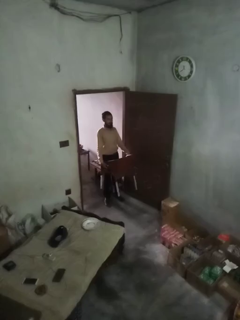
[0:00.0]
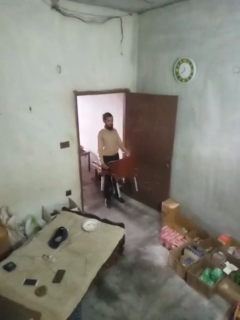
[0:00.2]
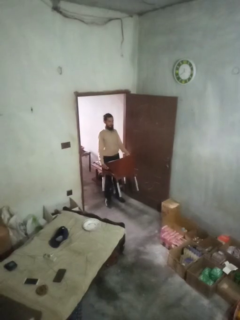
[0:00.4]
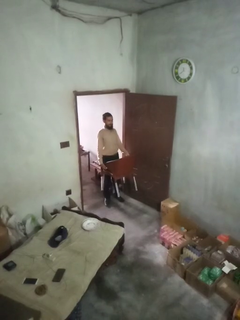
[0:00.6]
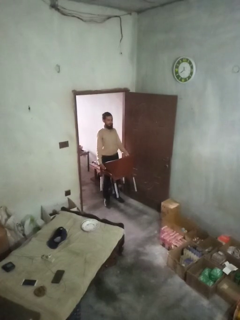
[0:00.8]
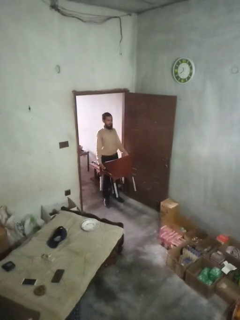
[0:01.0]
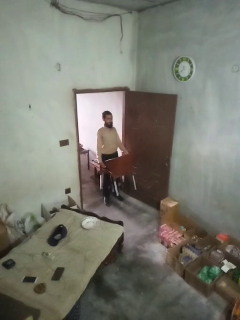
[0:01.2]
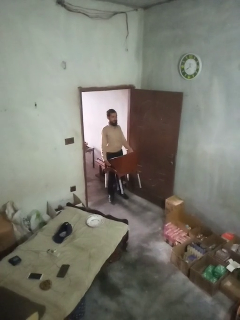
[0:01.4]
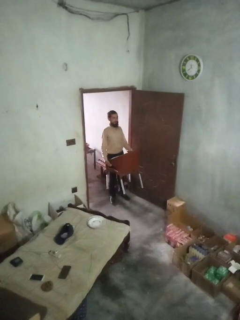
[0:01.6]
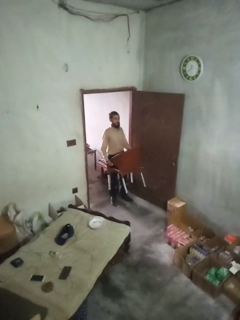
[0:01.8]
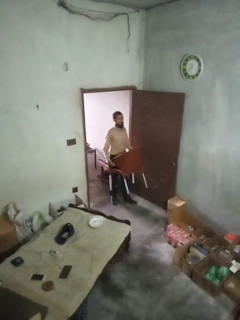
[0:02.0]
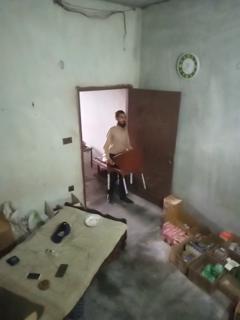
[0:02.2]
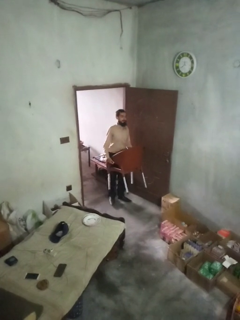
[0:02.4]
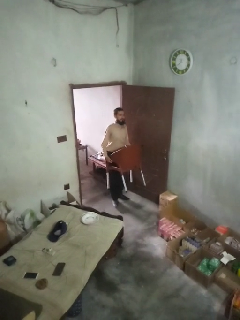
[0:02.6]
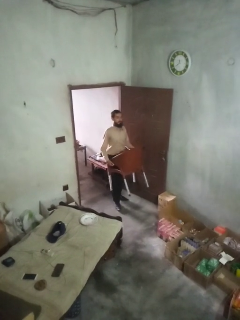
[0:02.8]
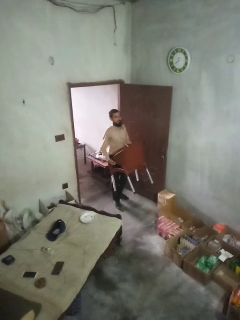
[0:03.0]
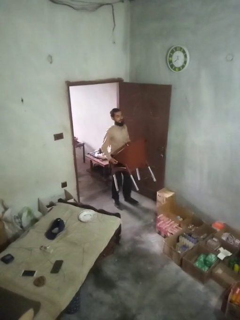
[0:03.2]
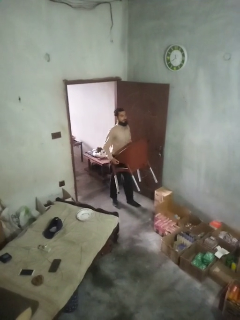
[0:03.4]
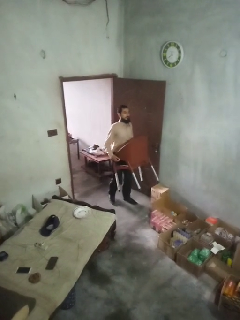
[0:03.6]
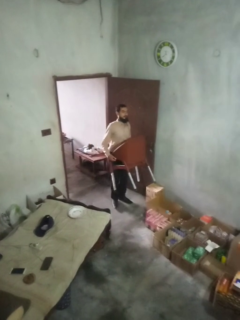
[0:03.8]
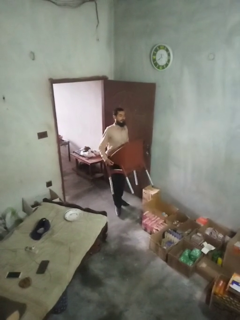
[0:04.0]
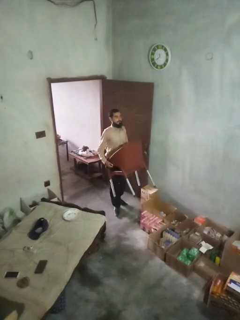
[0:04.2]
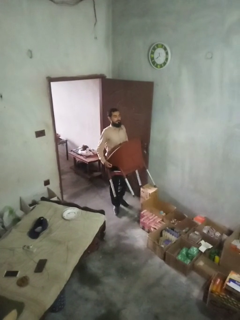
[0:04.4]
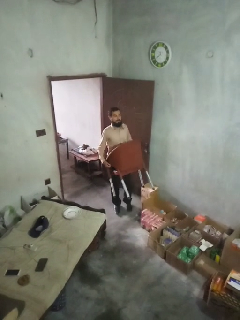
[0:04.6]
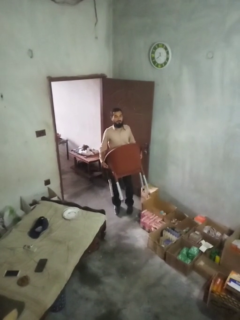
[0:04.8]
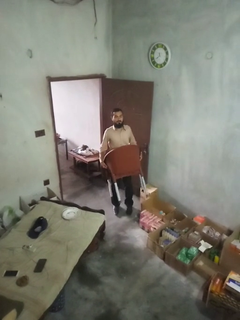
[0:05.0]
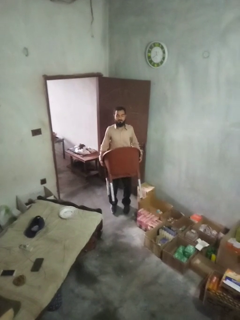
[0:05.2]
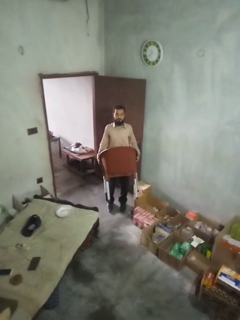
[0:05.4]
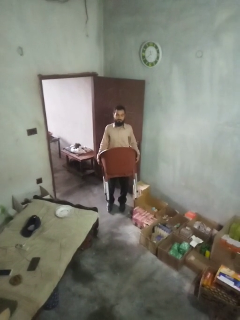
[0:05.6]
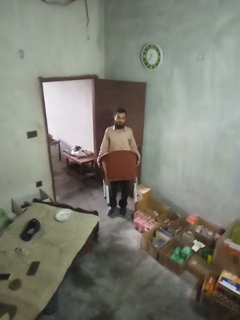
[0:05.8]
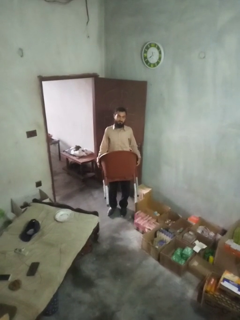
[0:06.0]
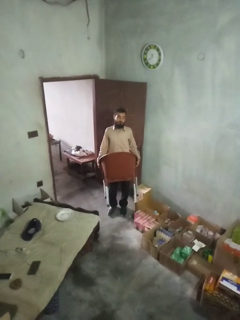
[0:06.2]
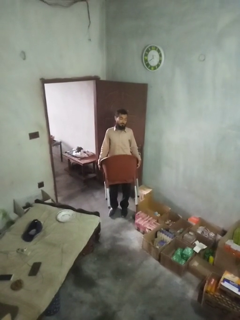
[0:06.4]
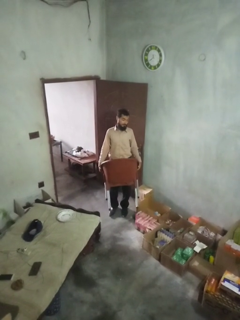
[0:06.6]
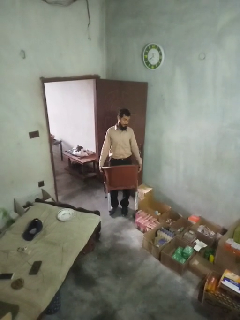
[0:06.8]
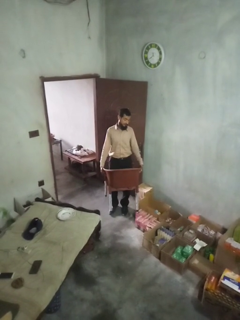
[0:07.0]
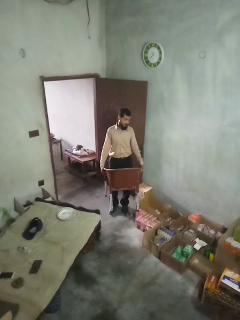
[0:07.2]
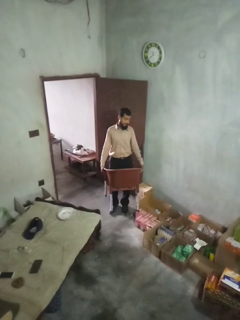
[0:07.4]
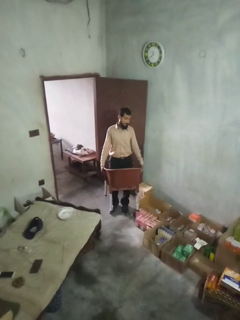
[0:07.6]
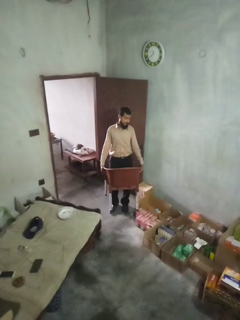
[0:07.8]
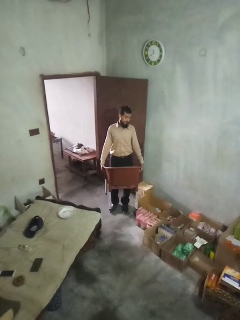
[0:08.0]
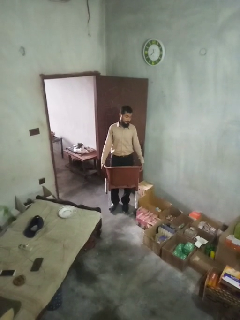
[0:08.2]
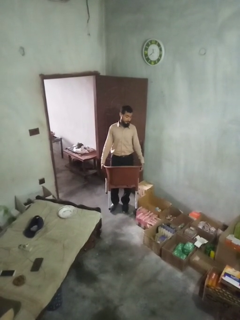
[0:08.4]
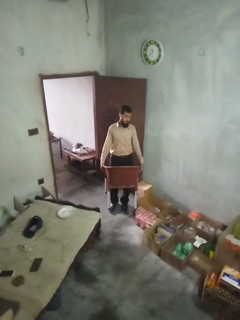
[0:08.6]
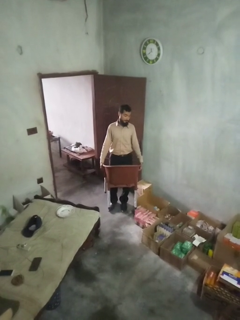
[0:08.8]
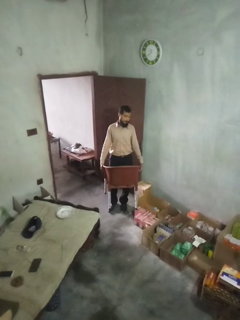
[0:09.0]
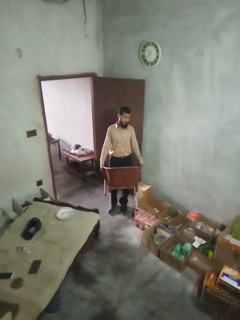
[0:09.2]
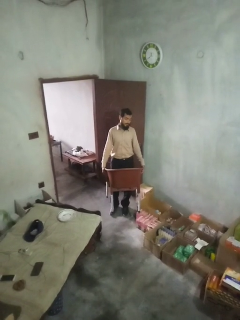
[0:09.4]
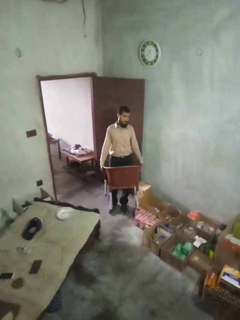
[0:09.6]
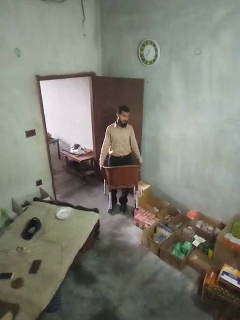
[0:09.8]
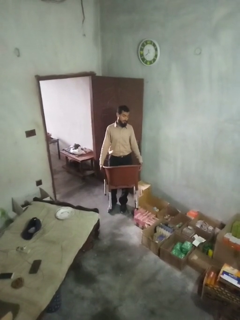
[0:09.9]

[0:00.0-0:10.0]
person carries furniture

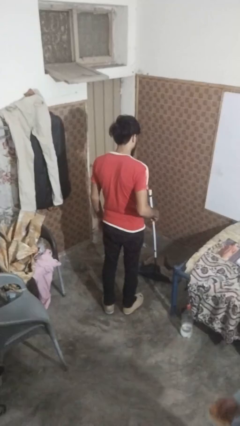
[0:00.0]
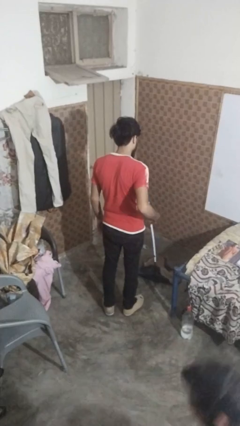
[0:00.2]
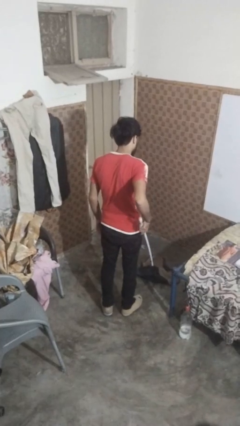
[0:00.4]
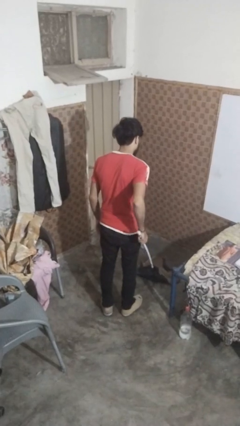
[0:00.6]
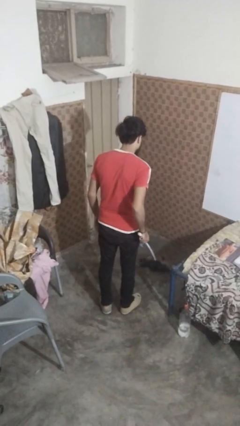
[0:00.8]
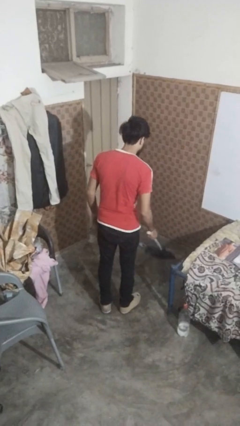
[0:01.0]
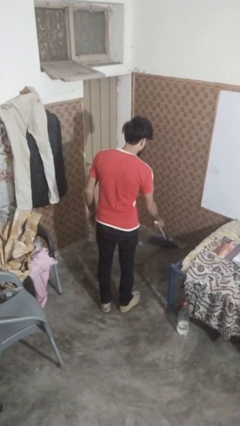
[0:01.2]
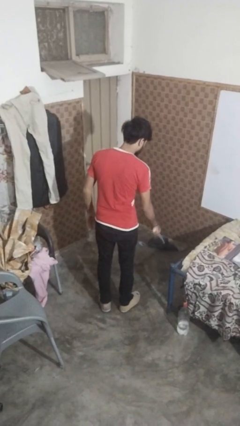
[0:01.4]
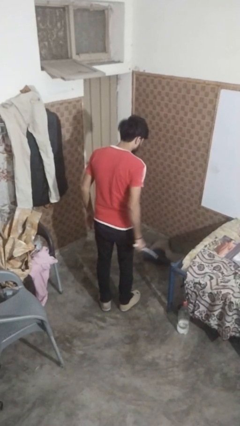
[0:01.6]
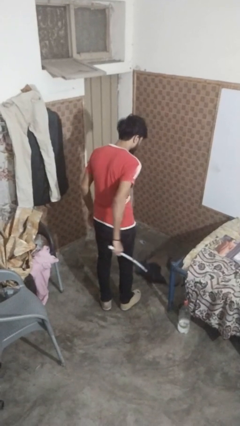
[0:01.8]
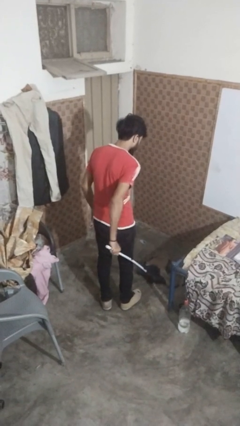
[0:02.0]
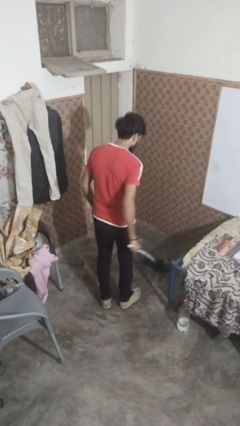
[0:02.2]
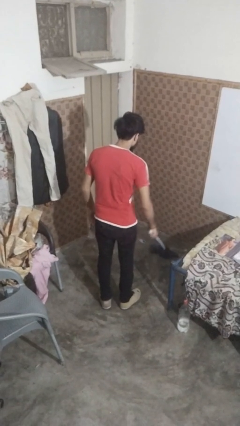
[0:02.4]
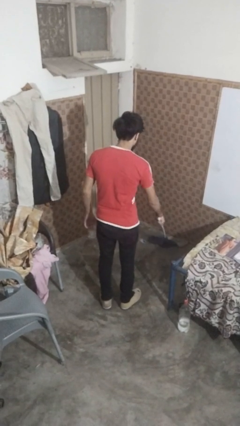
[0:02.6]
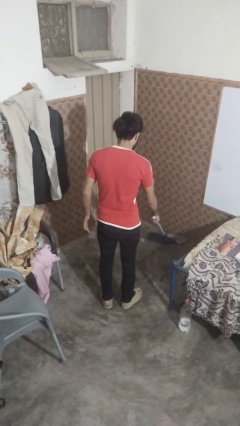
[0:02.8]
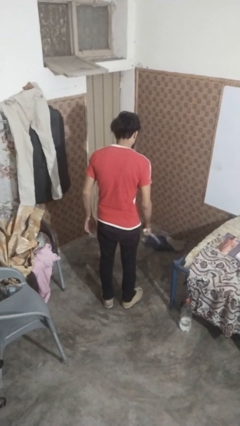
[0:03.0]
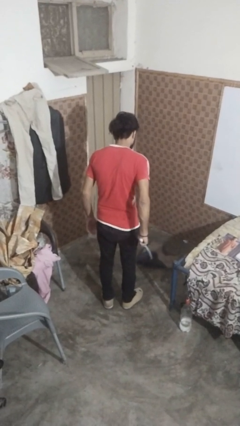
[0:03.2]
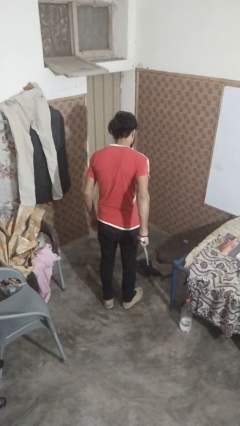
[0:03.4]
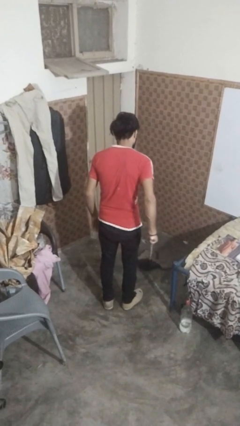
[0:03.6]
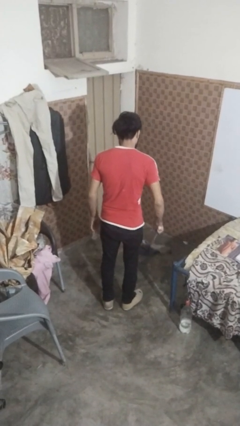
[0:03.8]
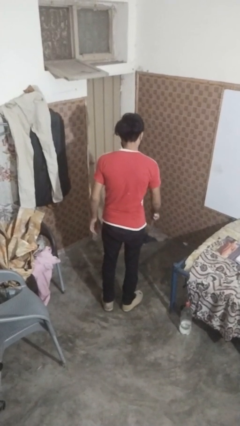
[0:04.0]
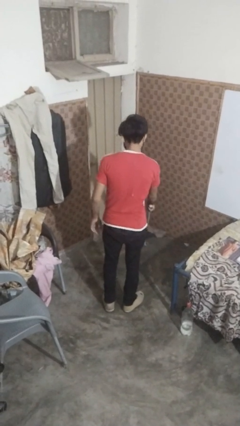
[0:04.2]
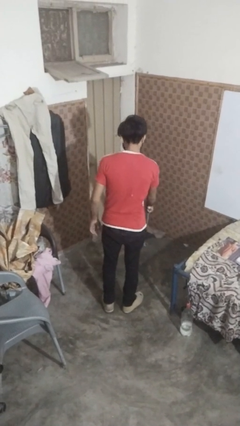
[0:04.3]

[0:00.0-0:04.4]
person mops

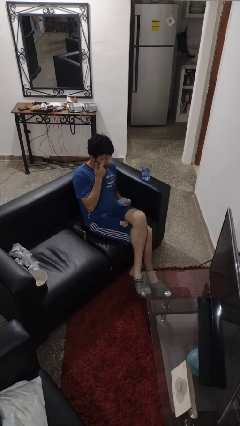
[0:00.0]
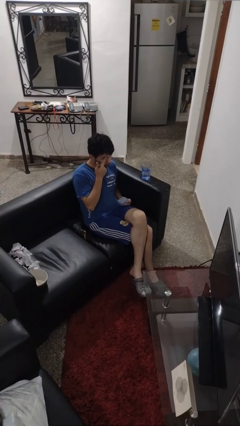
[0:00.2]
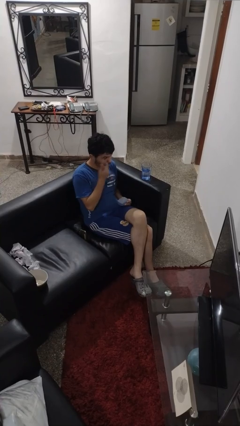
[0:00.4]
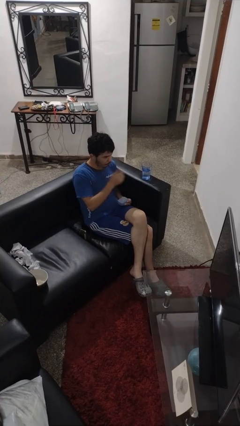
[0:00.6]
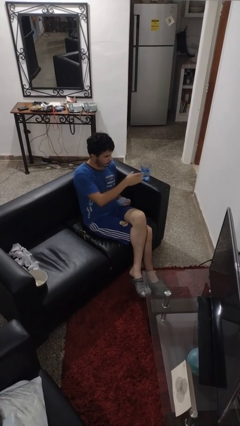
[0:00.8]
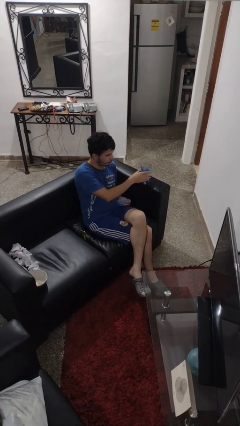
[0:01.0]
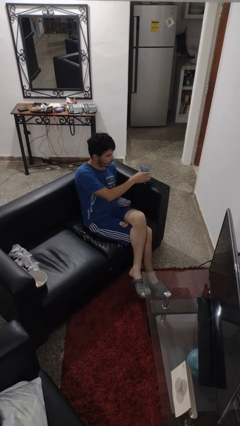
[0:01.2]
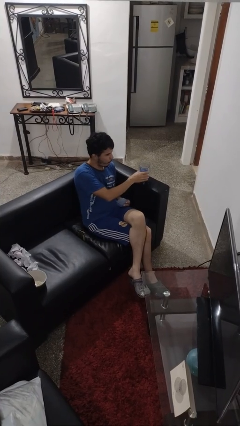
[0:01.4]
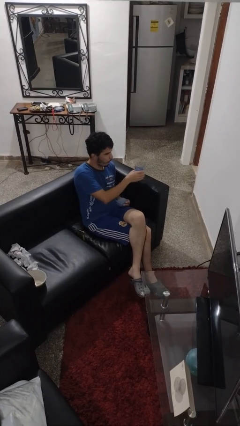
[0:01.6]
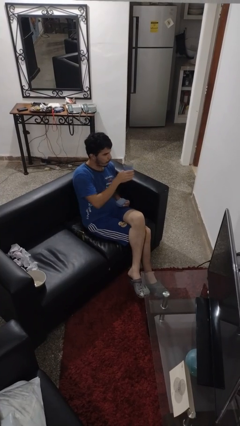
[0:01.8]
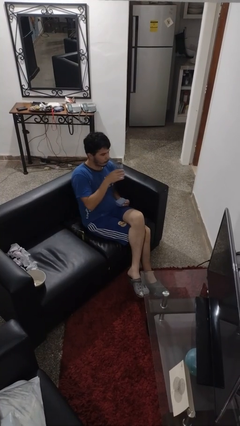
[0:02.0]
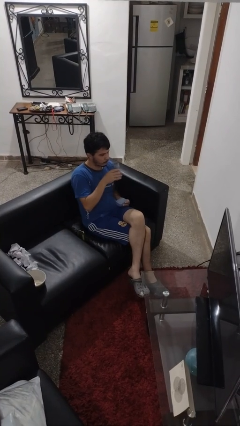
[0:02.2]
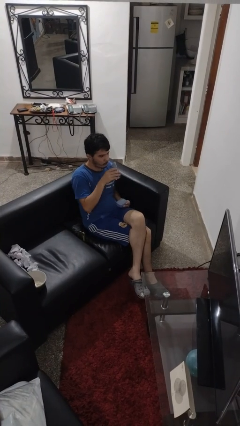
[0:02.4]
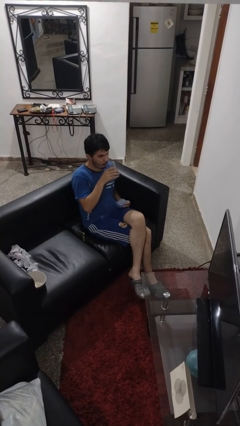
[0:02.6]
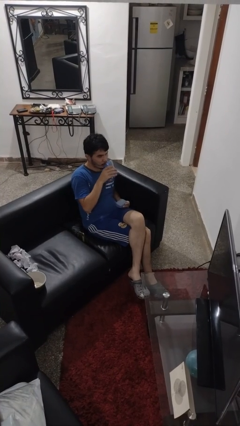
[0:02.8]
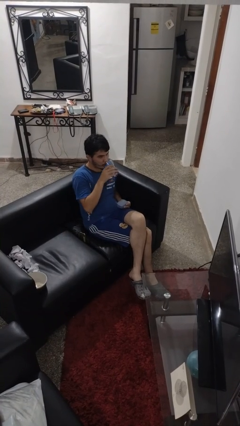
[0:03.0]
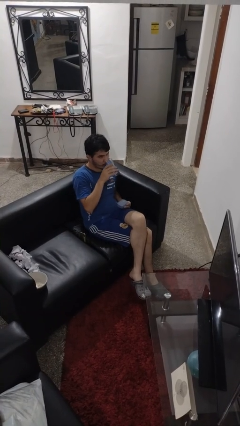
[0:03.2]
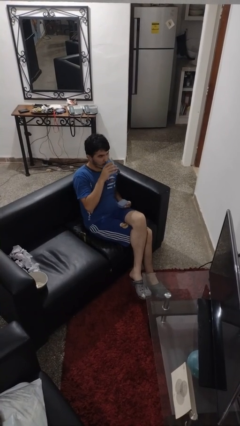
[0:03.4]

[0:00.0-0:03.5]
person drinks from cup

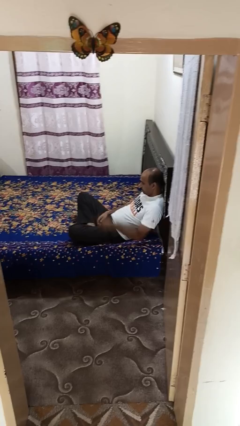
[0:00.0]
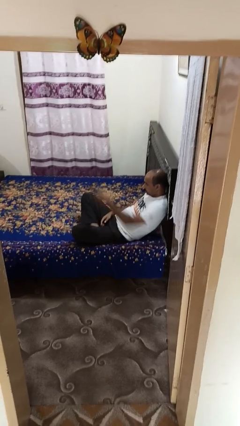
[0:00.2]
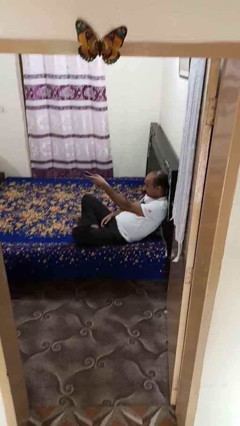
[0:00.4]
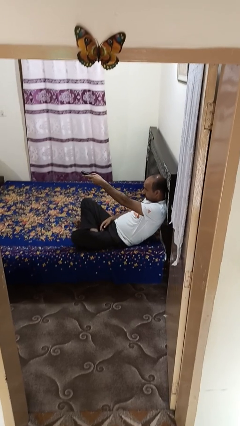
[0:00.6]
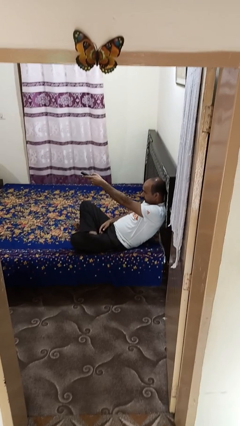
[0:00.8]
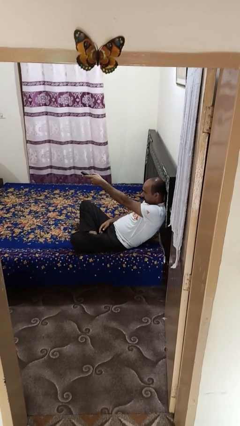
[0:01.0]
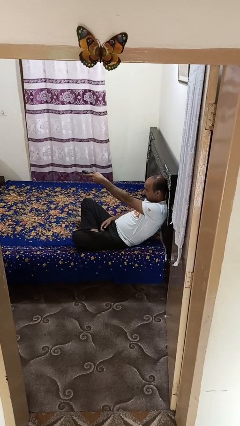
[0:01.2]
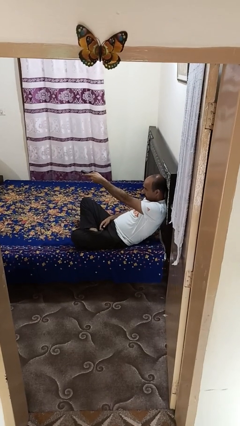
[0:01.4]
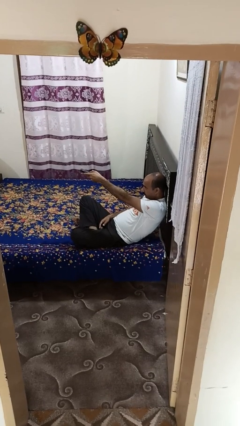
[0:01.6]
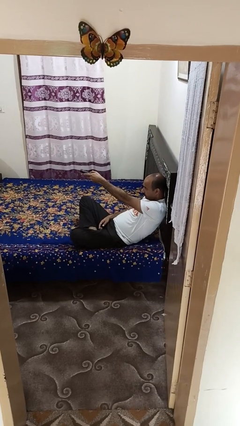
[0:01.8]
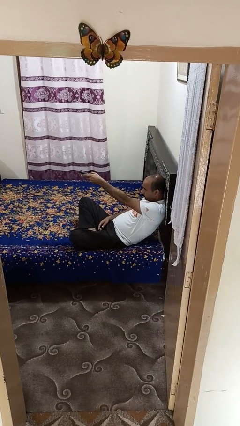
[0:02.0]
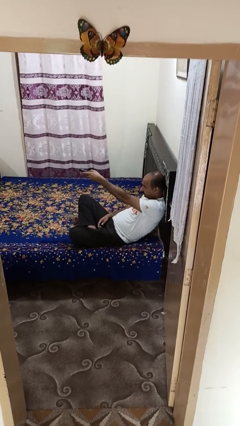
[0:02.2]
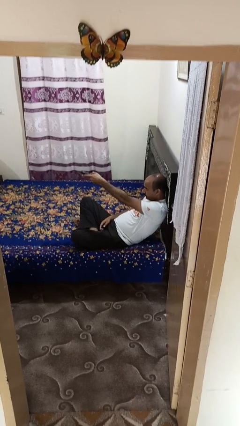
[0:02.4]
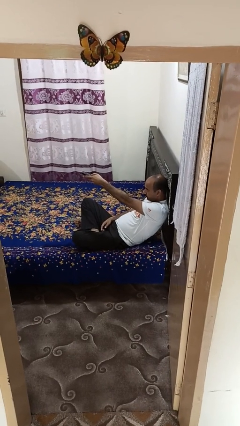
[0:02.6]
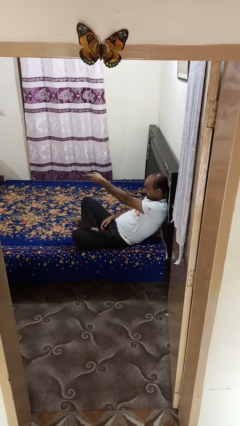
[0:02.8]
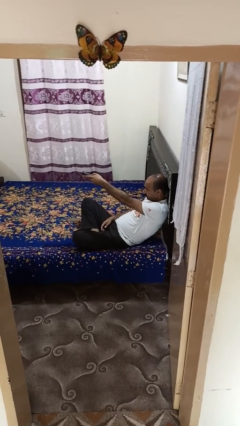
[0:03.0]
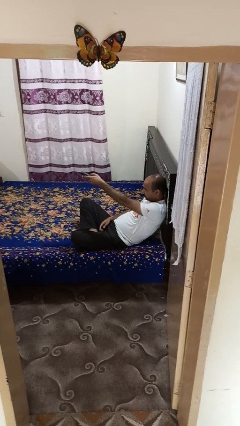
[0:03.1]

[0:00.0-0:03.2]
person uses television remote
